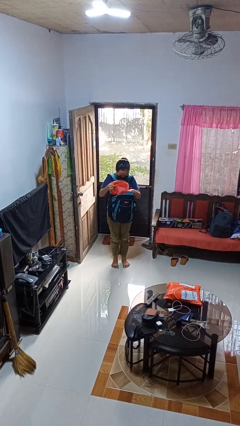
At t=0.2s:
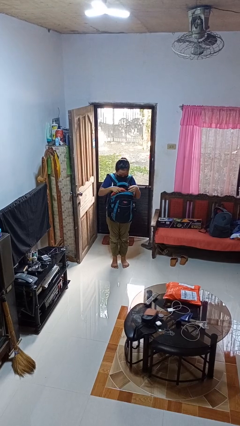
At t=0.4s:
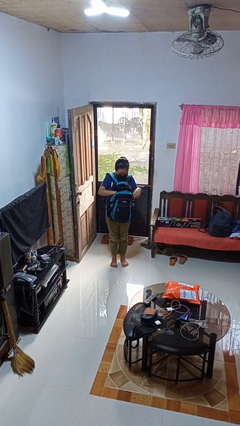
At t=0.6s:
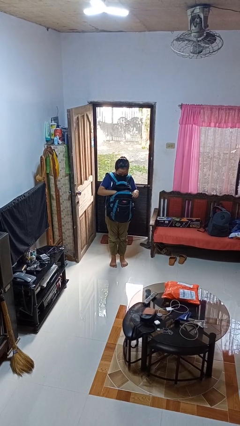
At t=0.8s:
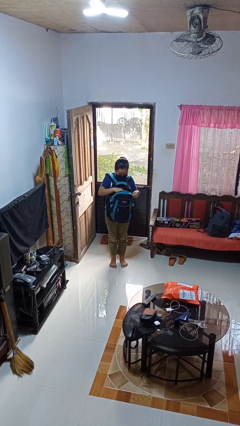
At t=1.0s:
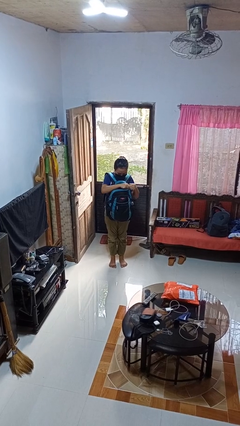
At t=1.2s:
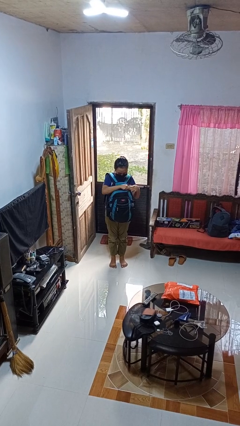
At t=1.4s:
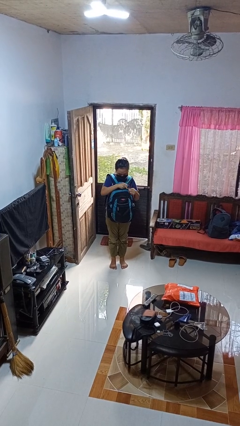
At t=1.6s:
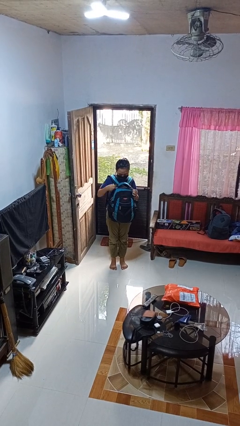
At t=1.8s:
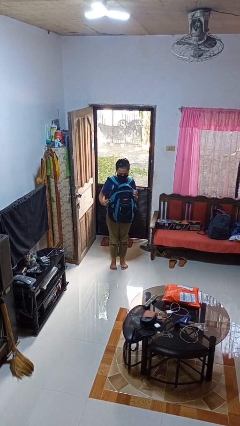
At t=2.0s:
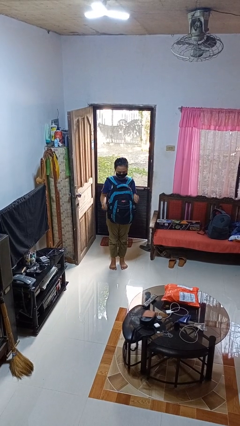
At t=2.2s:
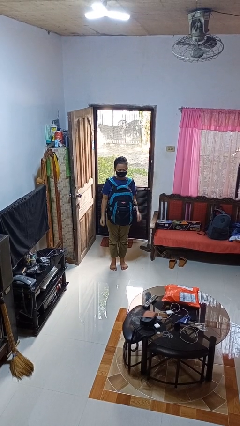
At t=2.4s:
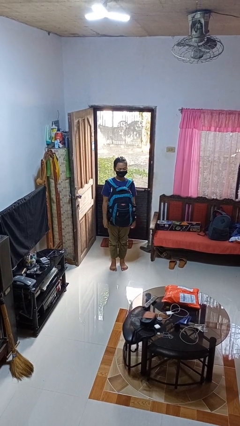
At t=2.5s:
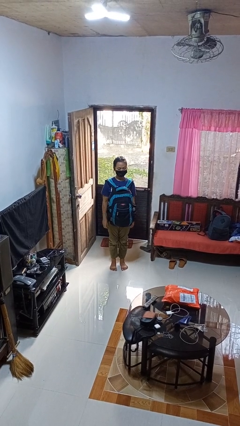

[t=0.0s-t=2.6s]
person puts object into backpack

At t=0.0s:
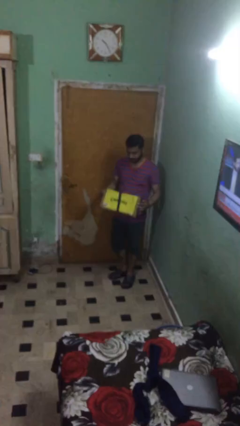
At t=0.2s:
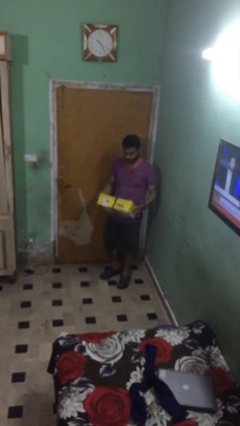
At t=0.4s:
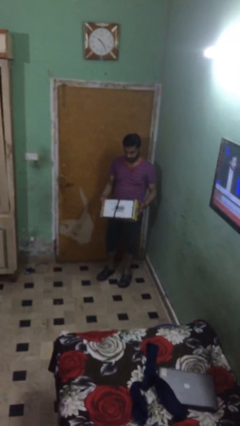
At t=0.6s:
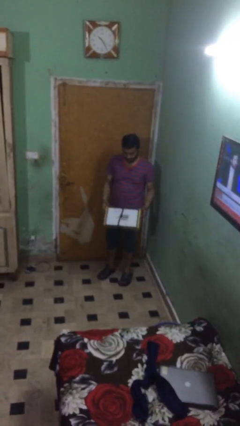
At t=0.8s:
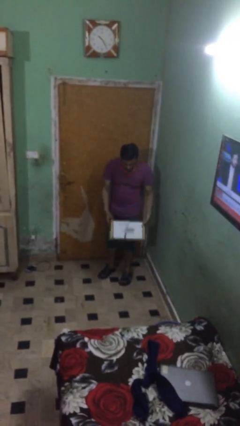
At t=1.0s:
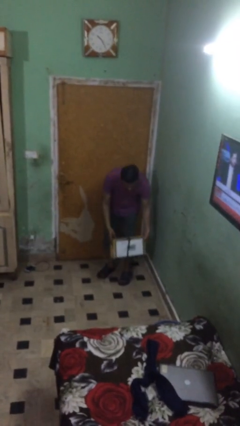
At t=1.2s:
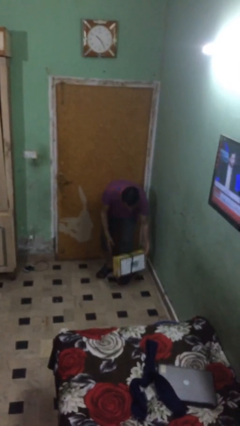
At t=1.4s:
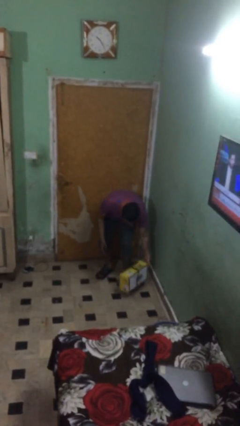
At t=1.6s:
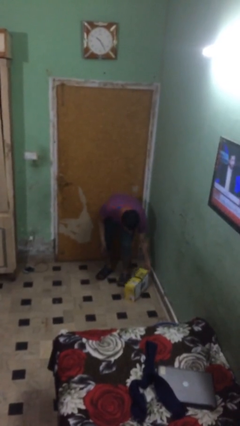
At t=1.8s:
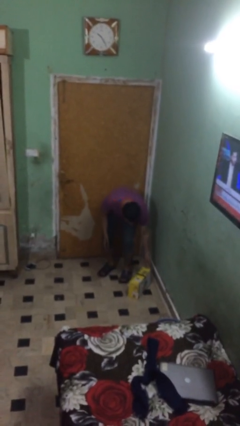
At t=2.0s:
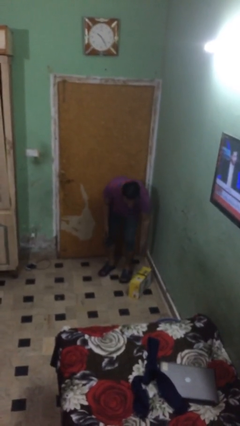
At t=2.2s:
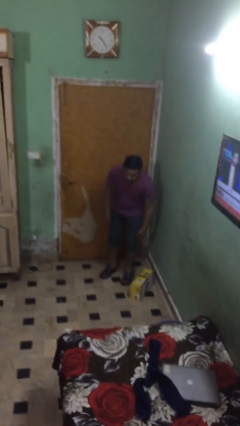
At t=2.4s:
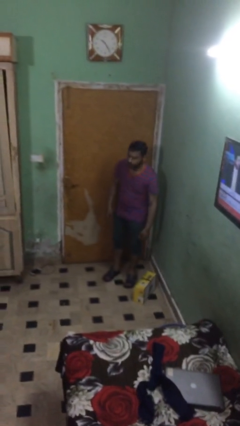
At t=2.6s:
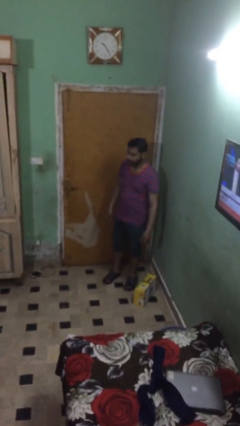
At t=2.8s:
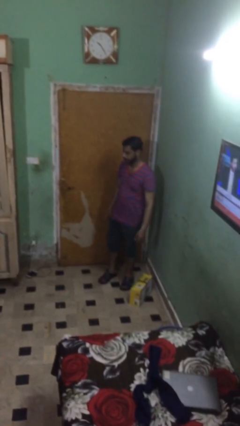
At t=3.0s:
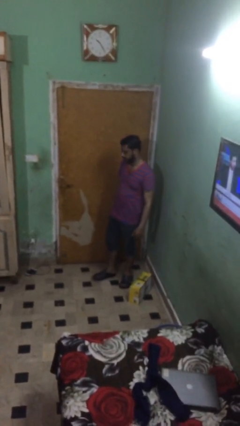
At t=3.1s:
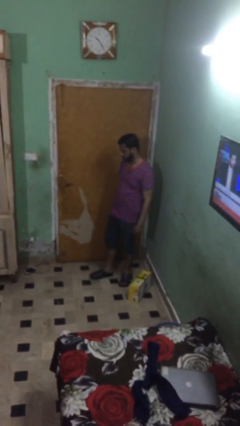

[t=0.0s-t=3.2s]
person puts down object on floor

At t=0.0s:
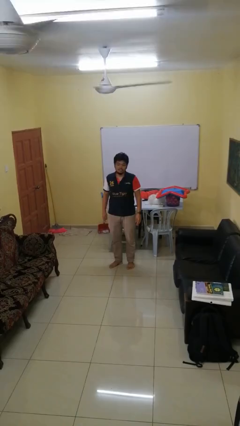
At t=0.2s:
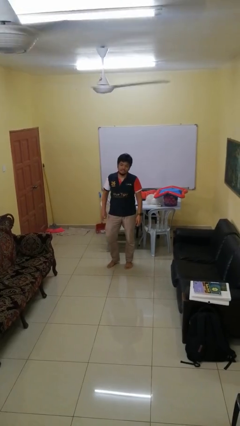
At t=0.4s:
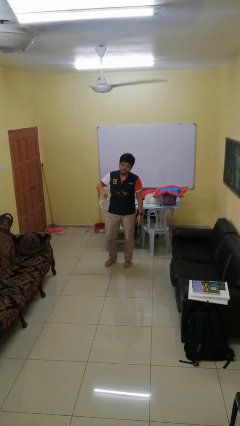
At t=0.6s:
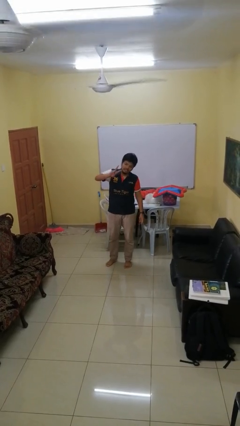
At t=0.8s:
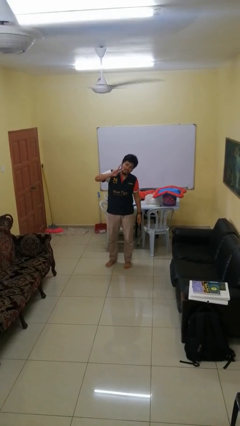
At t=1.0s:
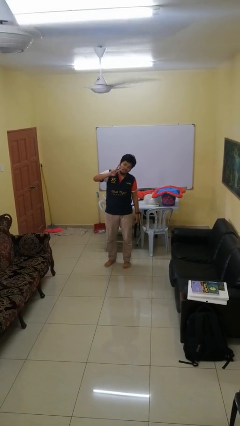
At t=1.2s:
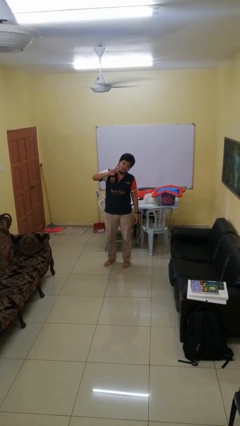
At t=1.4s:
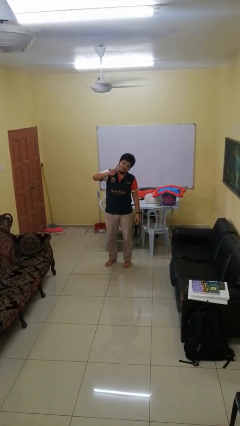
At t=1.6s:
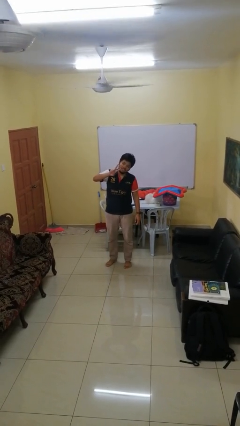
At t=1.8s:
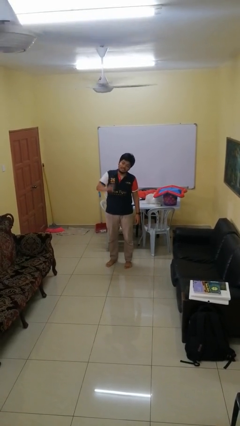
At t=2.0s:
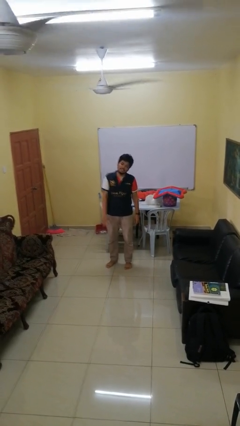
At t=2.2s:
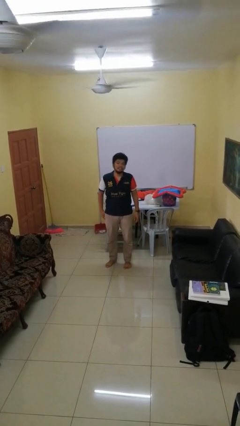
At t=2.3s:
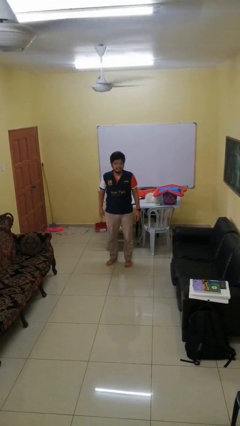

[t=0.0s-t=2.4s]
person gestures peace

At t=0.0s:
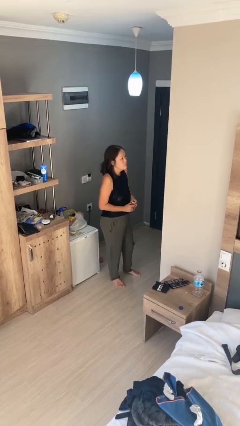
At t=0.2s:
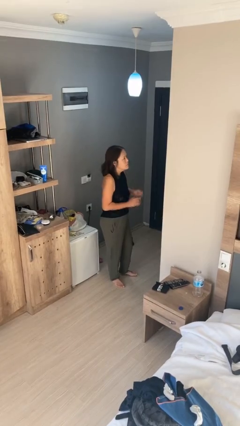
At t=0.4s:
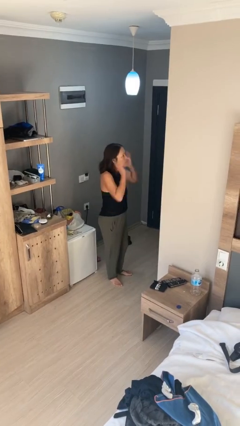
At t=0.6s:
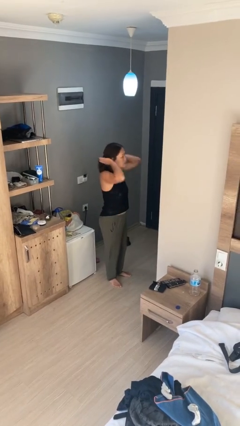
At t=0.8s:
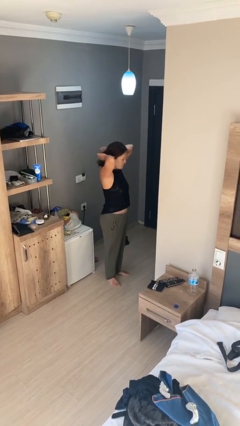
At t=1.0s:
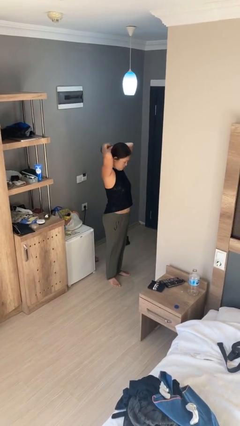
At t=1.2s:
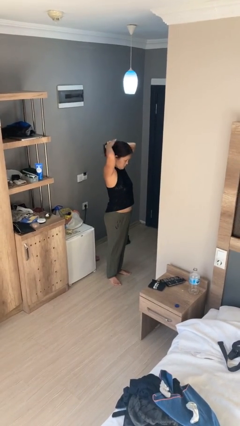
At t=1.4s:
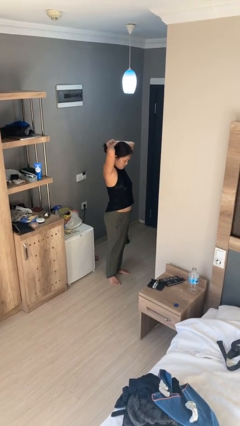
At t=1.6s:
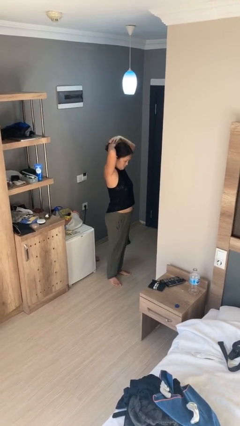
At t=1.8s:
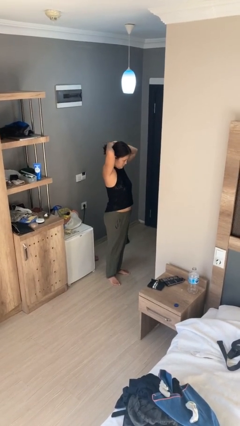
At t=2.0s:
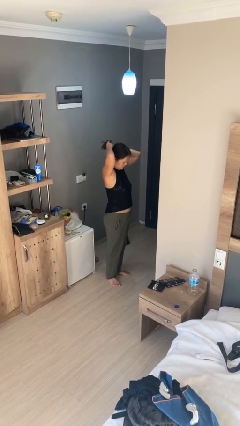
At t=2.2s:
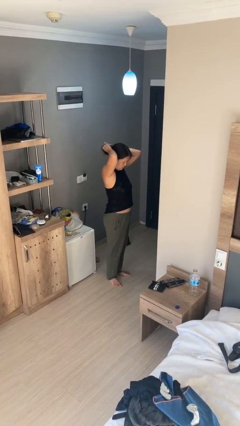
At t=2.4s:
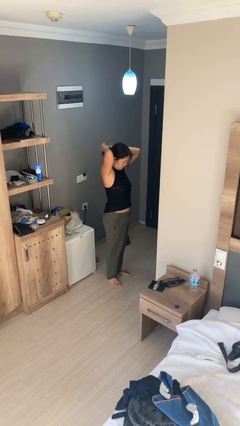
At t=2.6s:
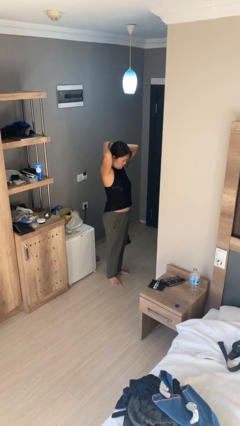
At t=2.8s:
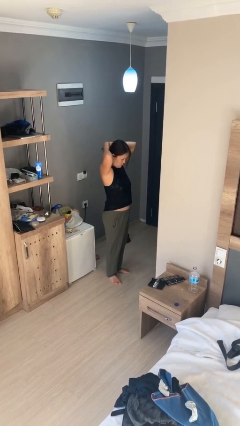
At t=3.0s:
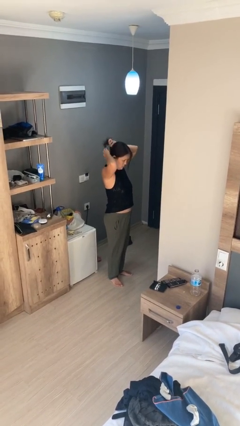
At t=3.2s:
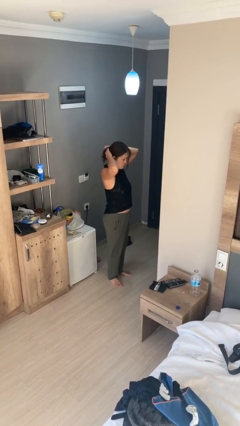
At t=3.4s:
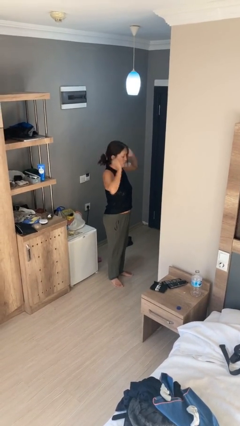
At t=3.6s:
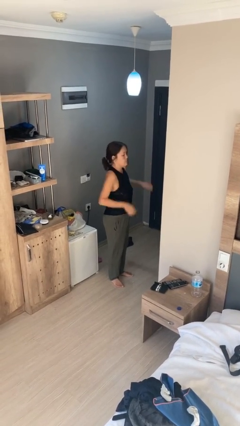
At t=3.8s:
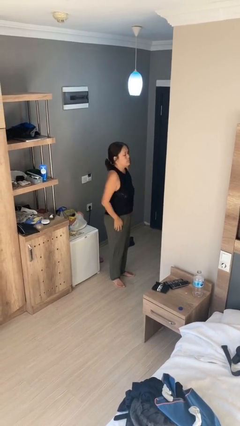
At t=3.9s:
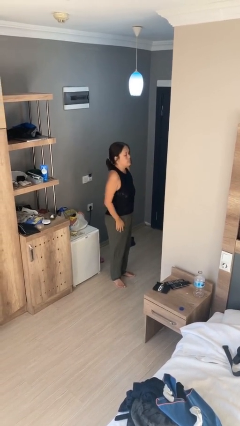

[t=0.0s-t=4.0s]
person puts hair in ponytail

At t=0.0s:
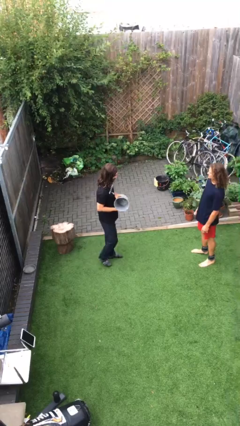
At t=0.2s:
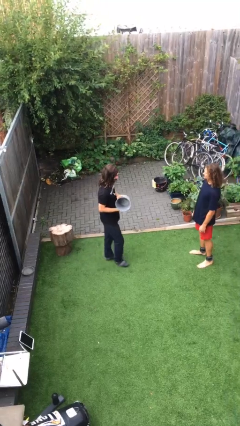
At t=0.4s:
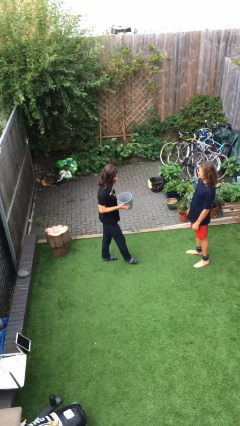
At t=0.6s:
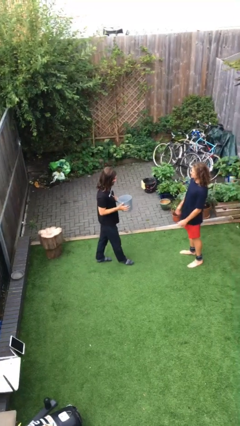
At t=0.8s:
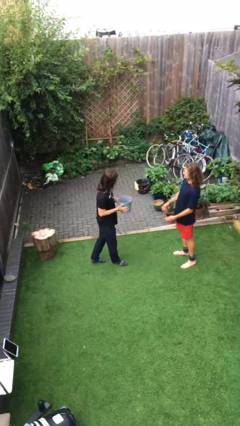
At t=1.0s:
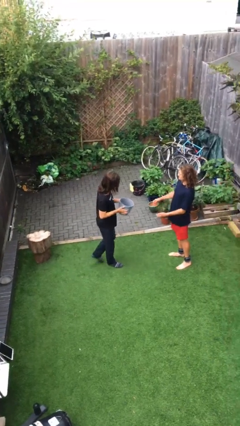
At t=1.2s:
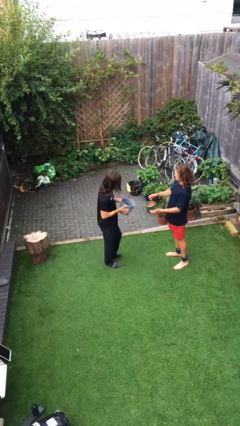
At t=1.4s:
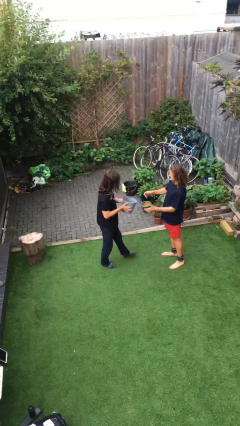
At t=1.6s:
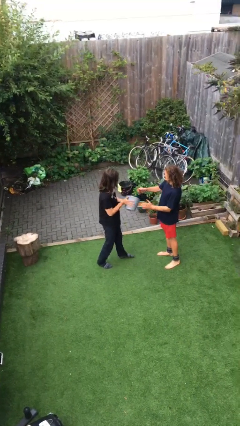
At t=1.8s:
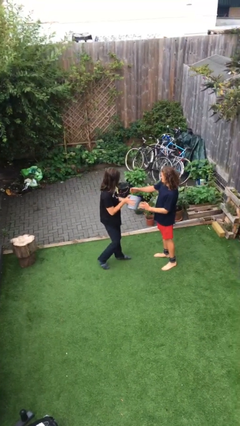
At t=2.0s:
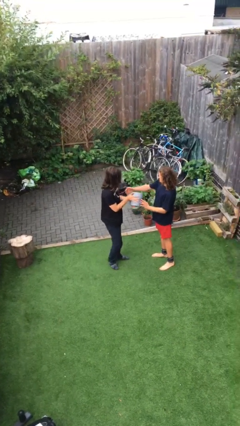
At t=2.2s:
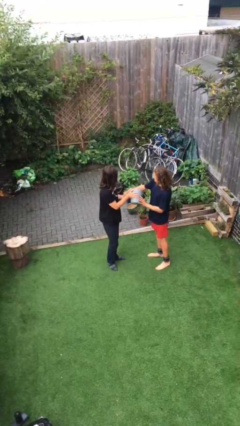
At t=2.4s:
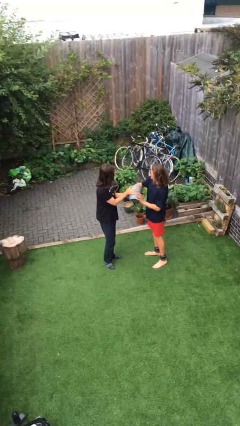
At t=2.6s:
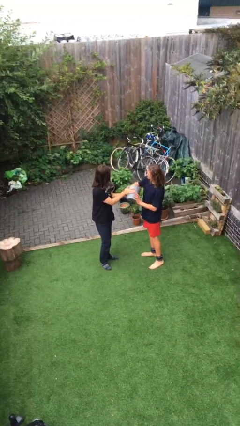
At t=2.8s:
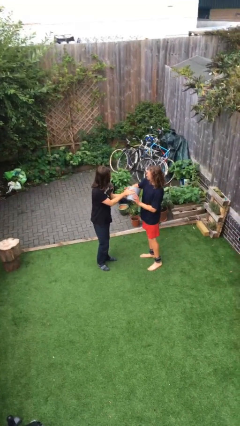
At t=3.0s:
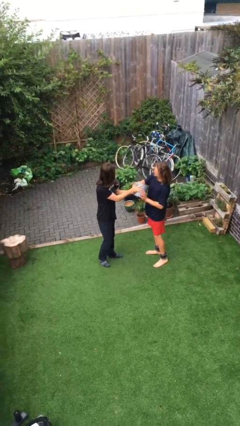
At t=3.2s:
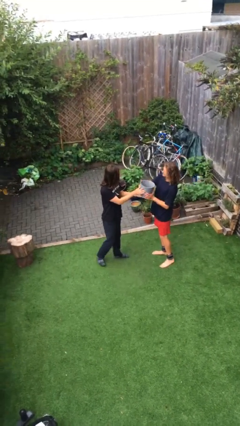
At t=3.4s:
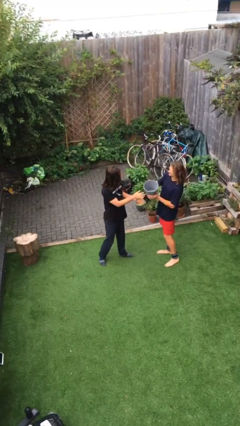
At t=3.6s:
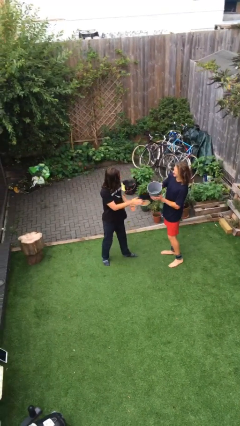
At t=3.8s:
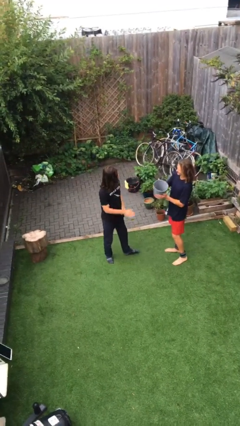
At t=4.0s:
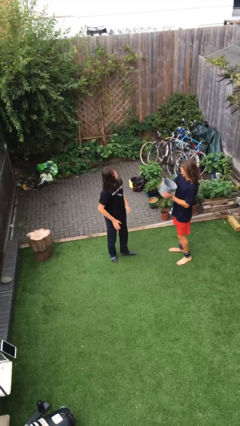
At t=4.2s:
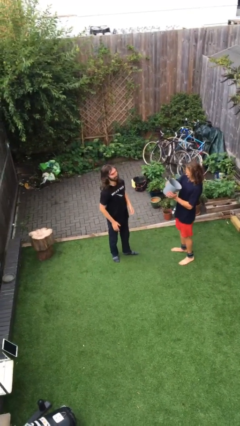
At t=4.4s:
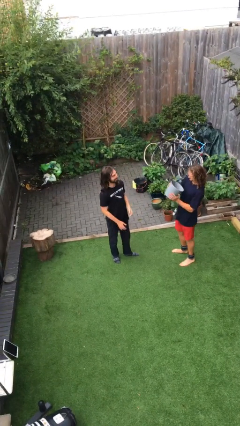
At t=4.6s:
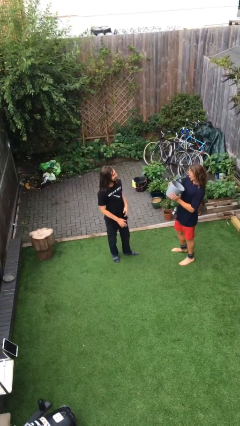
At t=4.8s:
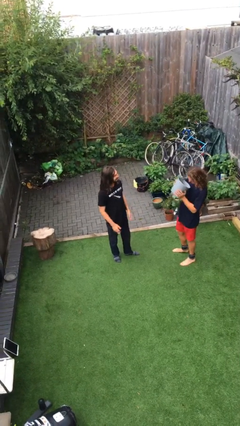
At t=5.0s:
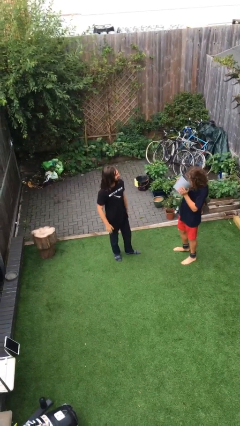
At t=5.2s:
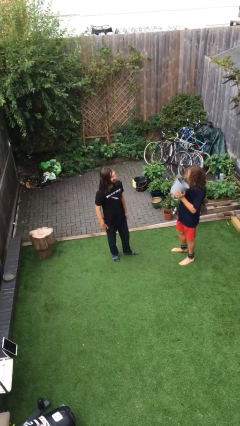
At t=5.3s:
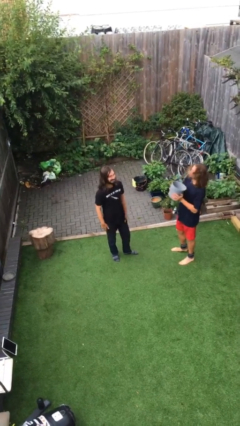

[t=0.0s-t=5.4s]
person transfers object to person
